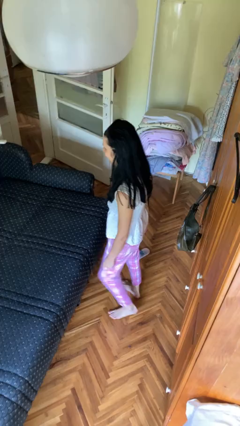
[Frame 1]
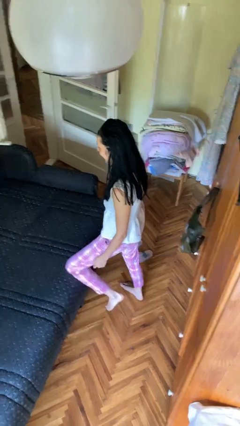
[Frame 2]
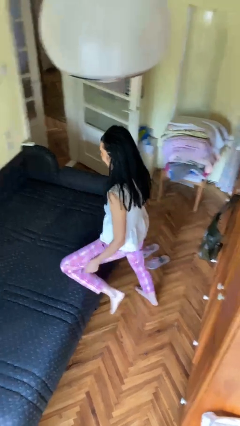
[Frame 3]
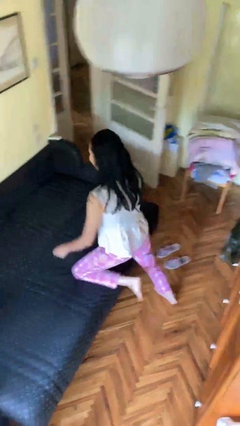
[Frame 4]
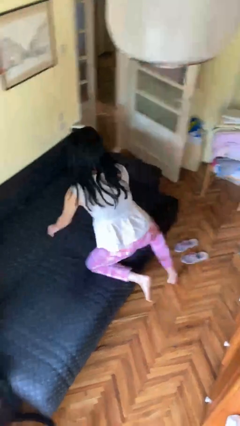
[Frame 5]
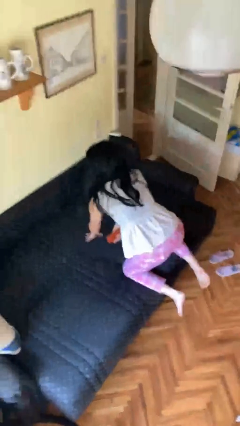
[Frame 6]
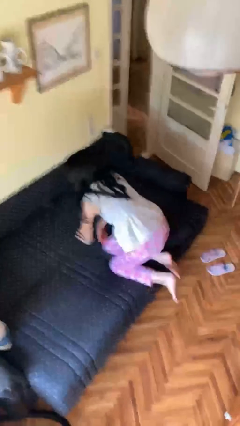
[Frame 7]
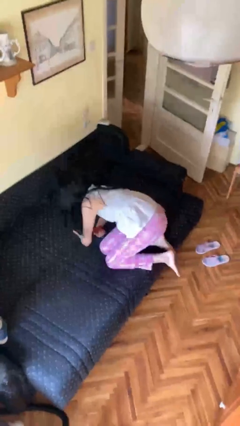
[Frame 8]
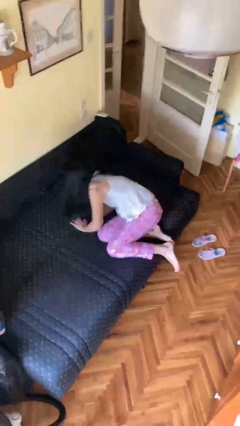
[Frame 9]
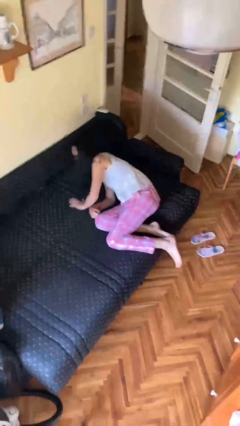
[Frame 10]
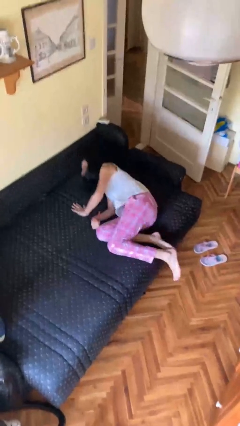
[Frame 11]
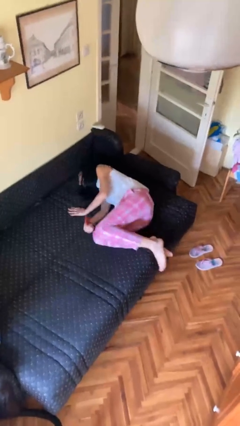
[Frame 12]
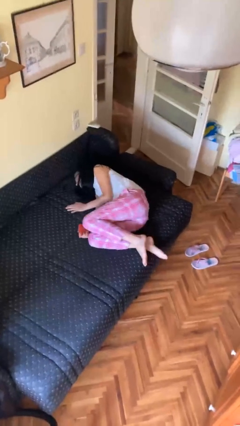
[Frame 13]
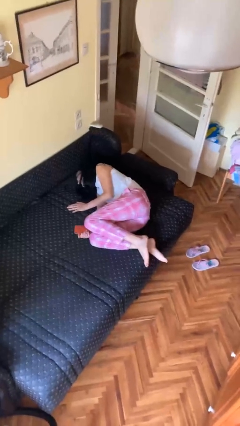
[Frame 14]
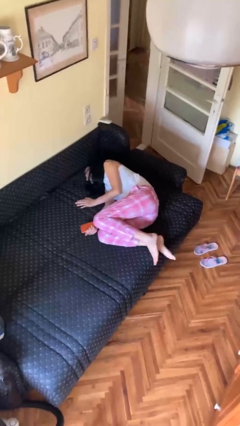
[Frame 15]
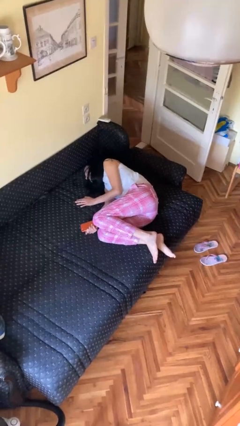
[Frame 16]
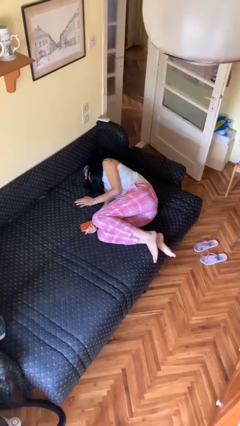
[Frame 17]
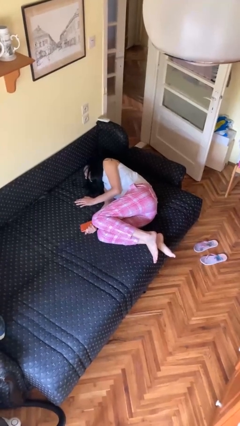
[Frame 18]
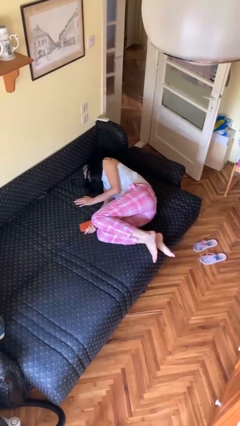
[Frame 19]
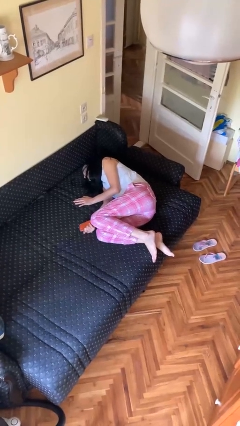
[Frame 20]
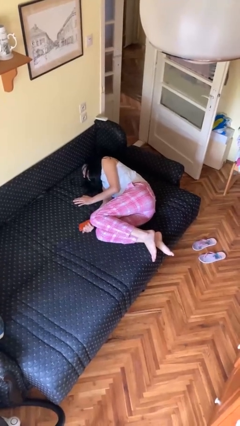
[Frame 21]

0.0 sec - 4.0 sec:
person lies down on bed

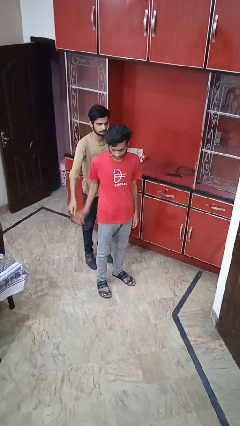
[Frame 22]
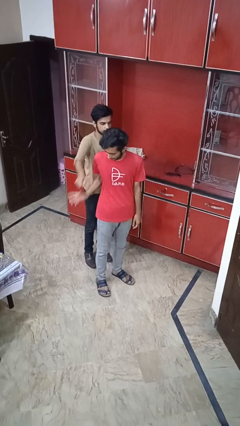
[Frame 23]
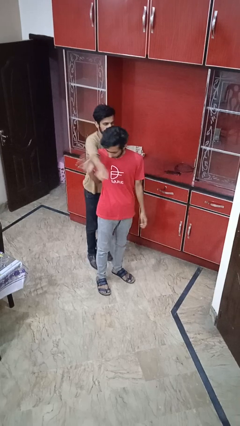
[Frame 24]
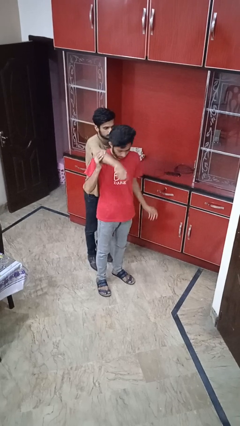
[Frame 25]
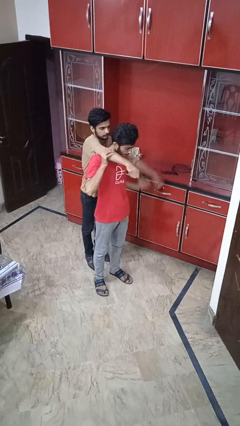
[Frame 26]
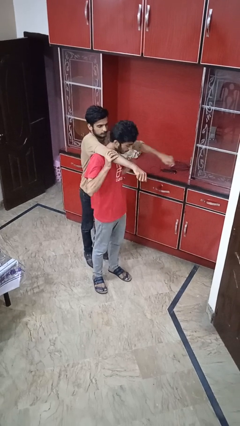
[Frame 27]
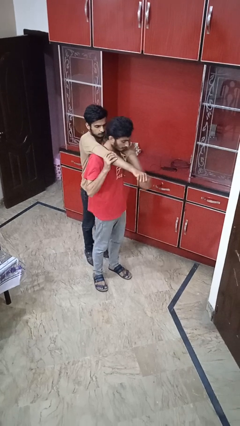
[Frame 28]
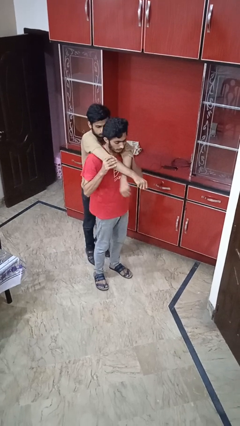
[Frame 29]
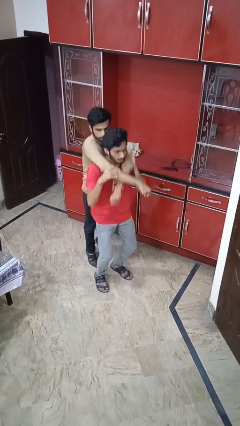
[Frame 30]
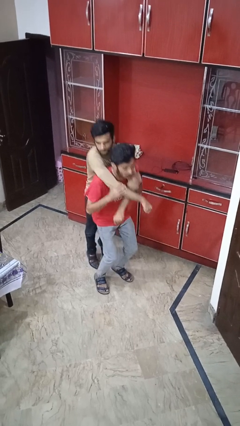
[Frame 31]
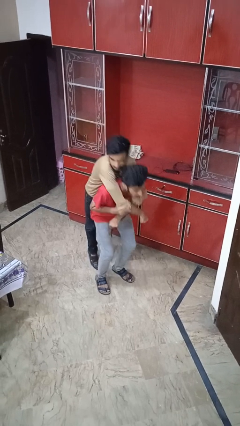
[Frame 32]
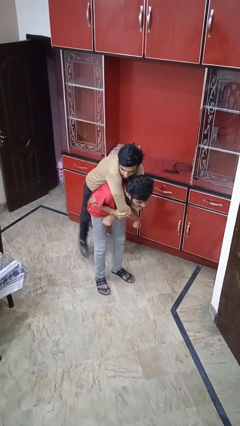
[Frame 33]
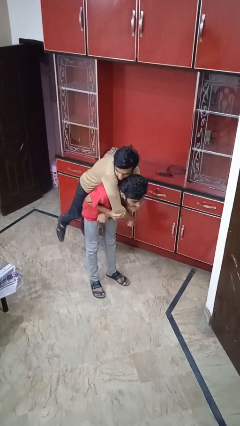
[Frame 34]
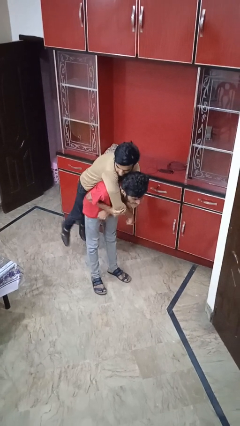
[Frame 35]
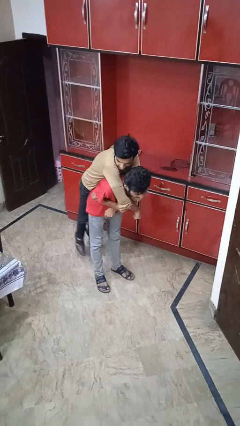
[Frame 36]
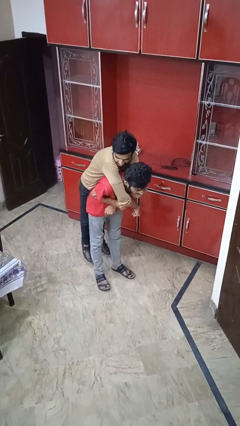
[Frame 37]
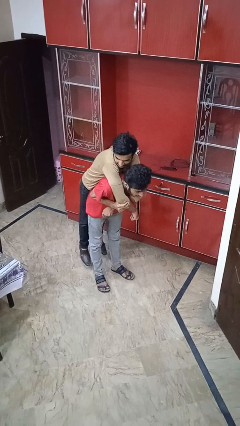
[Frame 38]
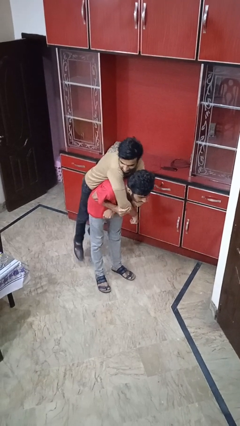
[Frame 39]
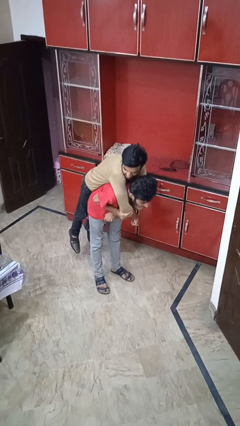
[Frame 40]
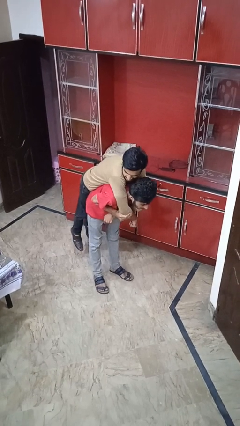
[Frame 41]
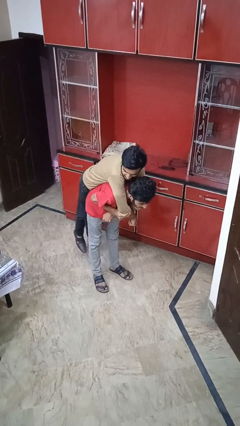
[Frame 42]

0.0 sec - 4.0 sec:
person carries person over shoulder

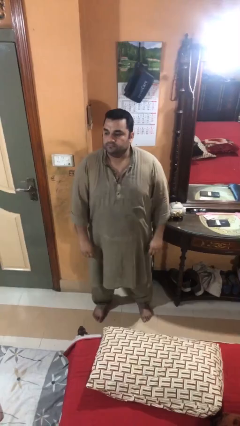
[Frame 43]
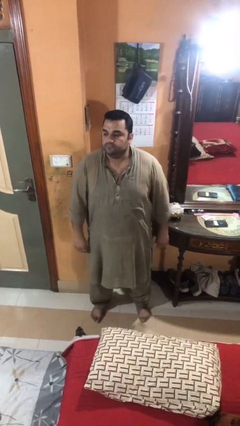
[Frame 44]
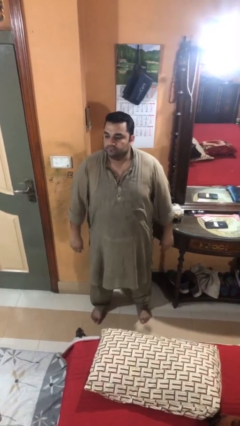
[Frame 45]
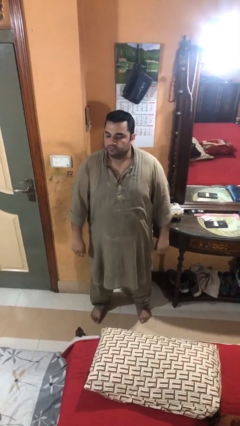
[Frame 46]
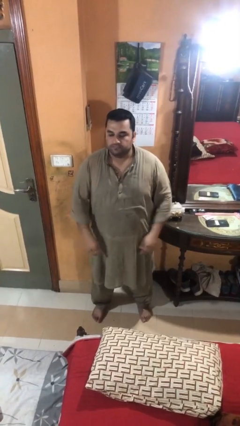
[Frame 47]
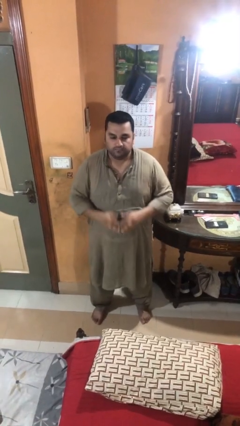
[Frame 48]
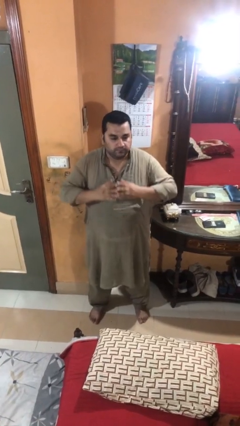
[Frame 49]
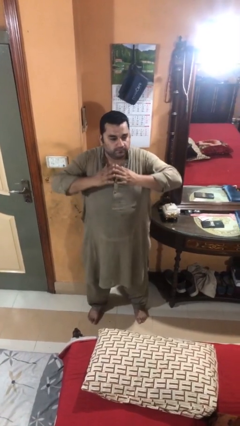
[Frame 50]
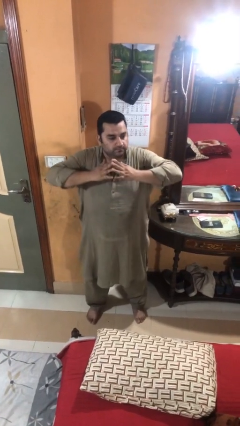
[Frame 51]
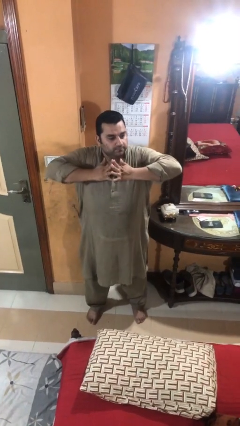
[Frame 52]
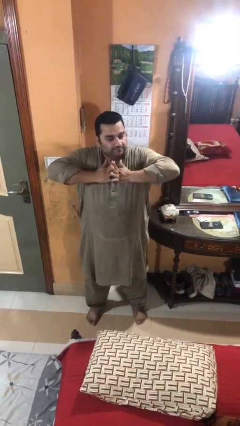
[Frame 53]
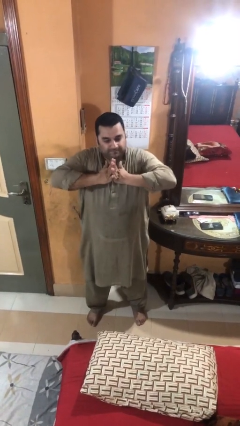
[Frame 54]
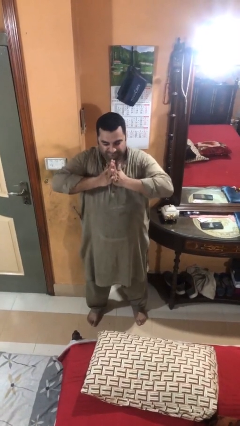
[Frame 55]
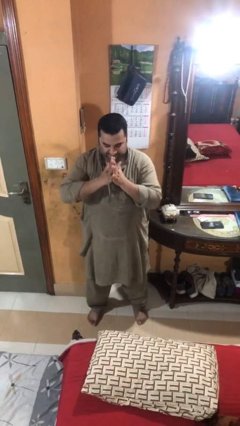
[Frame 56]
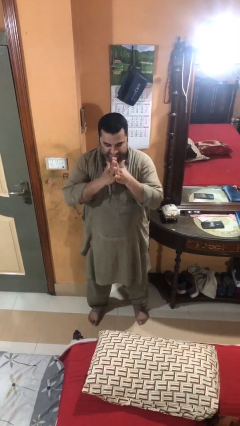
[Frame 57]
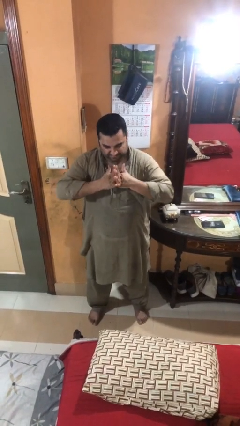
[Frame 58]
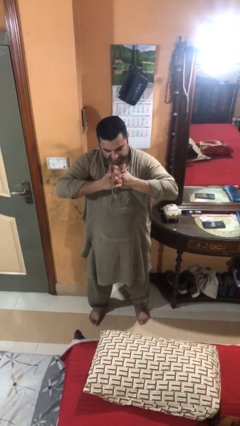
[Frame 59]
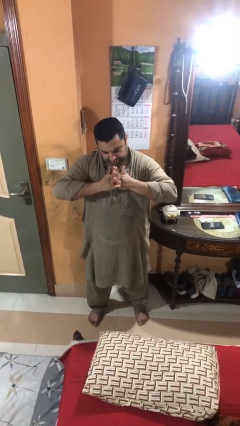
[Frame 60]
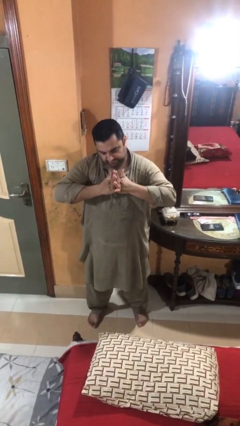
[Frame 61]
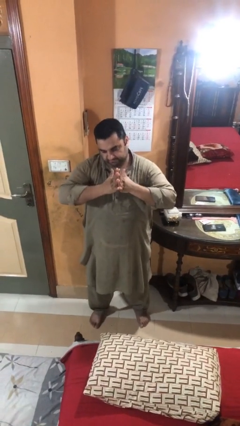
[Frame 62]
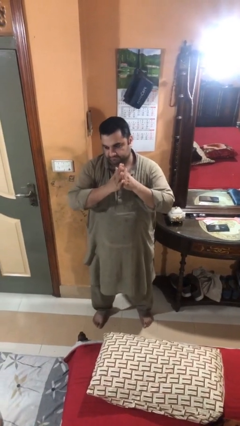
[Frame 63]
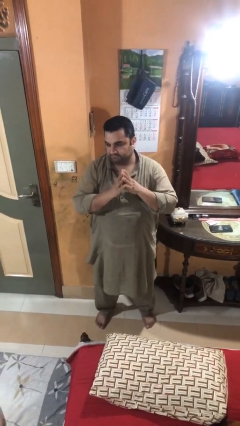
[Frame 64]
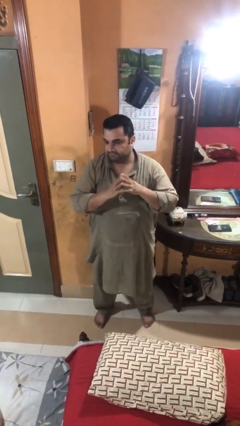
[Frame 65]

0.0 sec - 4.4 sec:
person cracks knuckles

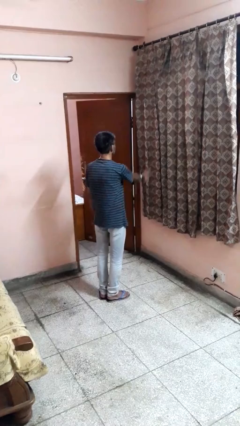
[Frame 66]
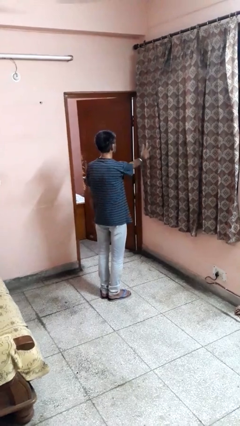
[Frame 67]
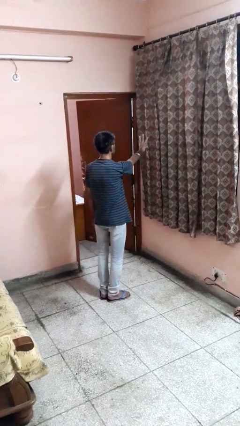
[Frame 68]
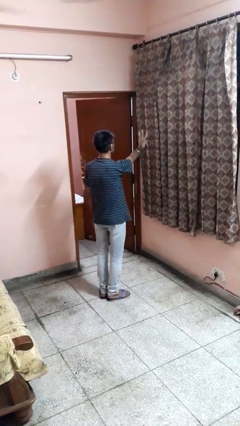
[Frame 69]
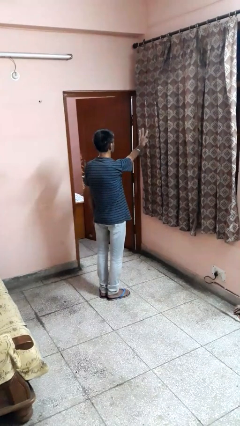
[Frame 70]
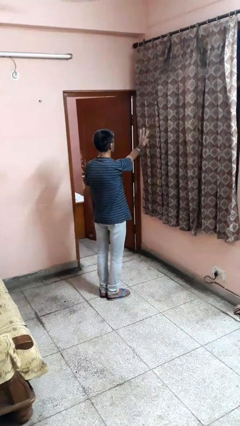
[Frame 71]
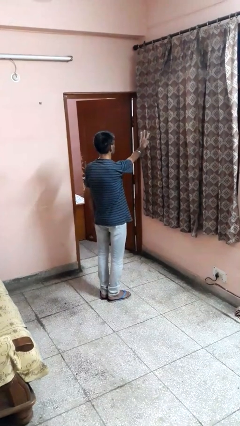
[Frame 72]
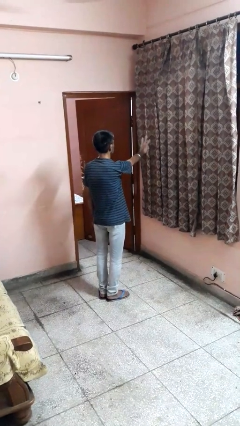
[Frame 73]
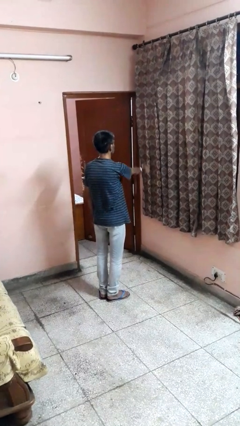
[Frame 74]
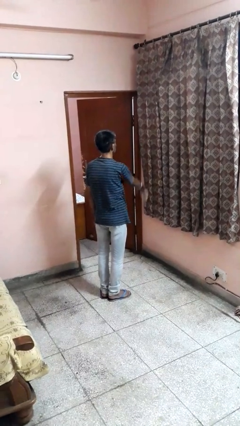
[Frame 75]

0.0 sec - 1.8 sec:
person gestures number three

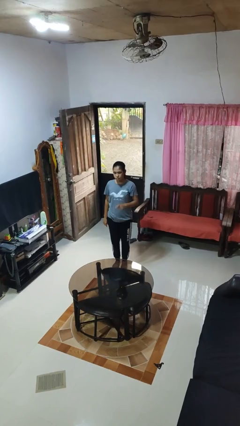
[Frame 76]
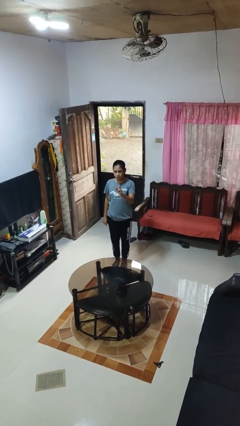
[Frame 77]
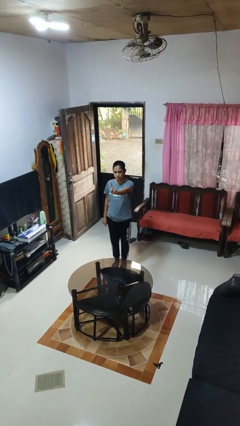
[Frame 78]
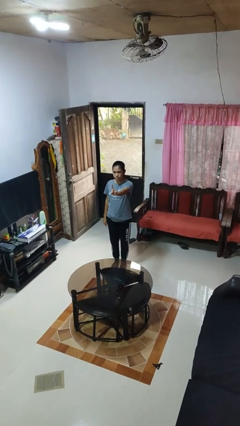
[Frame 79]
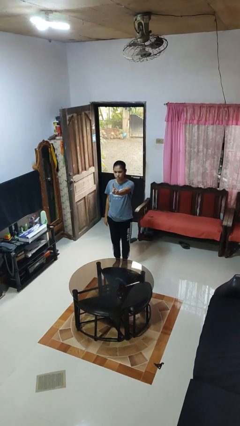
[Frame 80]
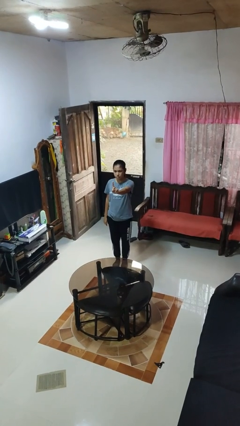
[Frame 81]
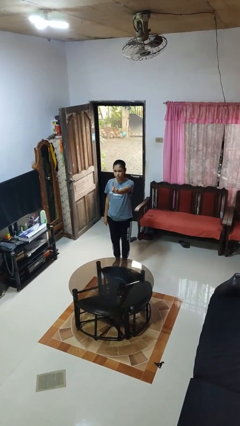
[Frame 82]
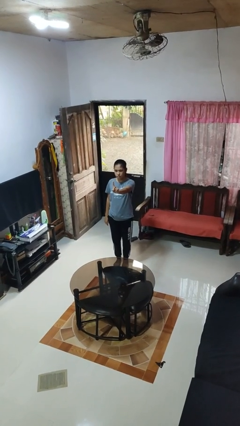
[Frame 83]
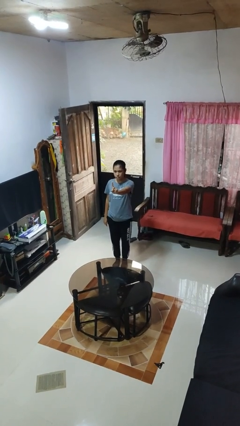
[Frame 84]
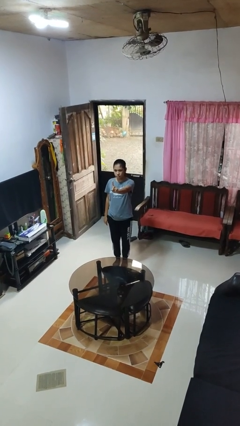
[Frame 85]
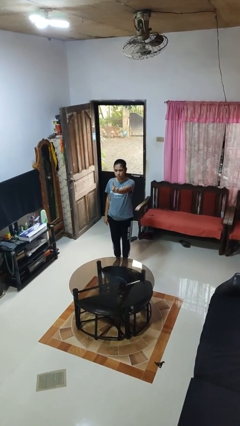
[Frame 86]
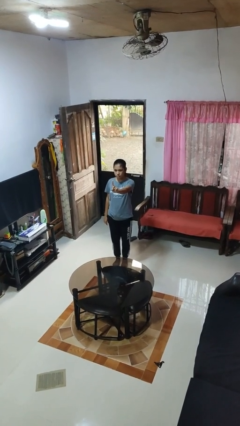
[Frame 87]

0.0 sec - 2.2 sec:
person gestures number one

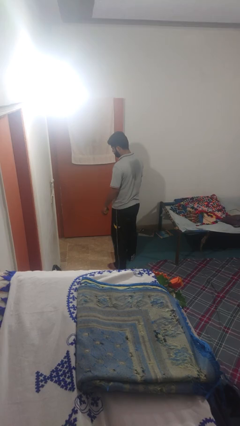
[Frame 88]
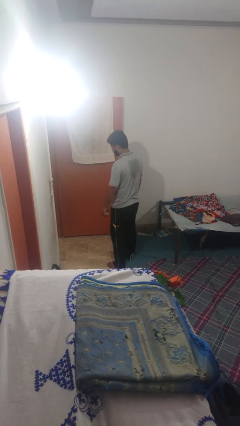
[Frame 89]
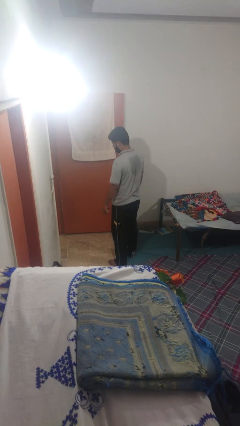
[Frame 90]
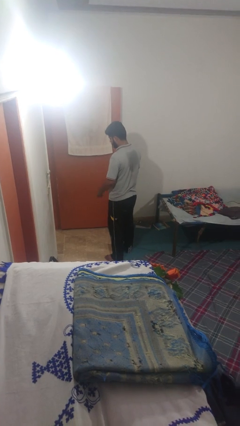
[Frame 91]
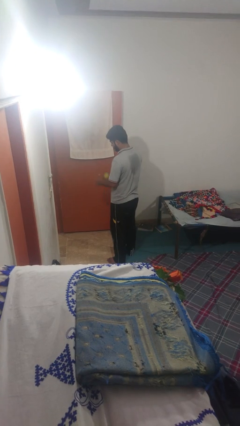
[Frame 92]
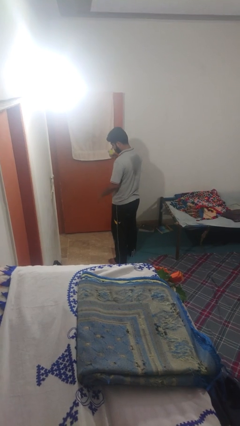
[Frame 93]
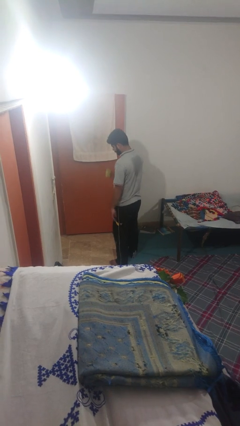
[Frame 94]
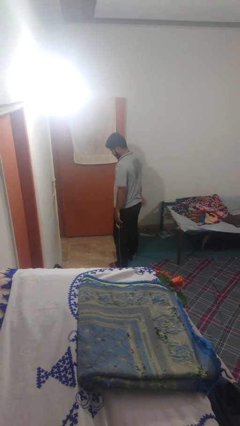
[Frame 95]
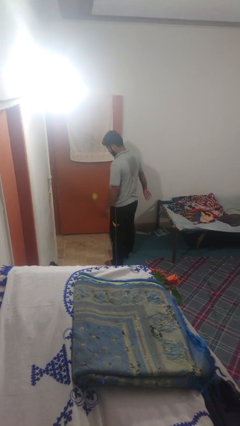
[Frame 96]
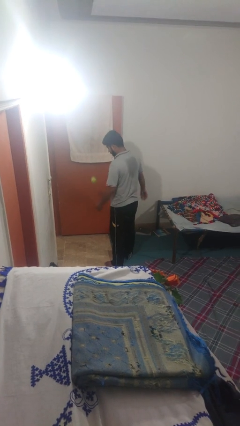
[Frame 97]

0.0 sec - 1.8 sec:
person bounces ball on floor
